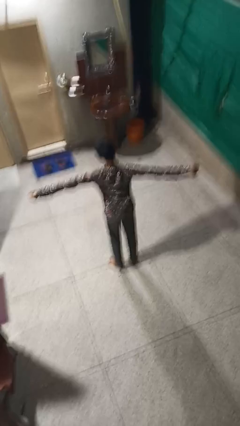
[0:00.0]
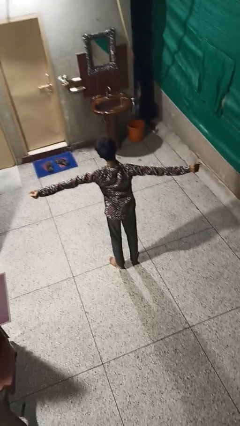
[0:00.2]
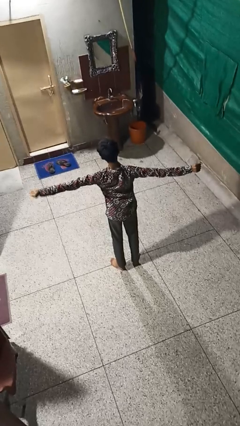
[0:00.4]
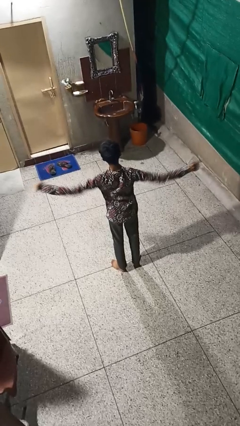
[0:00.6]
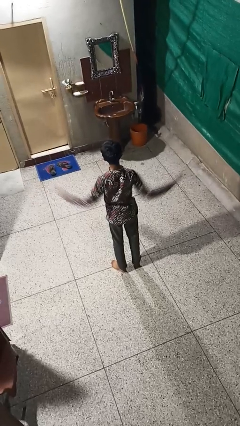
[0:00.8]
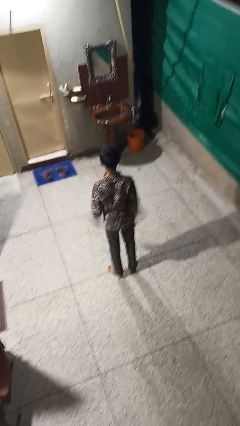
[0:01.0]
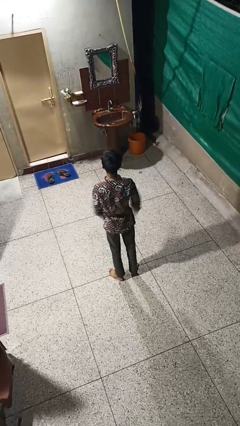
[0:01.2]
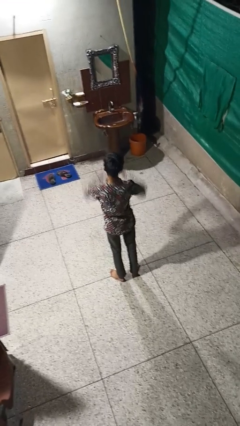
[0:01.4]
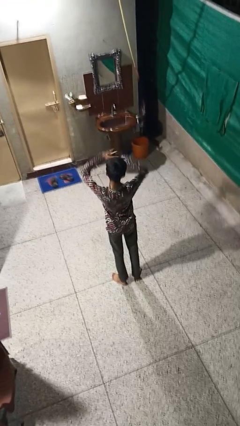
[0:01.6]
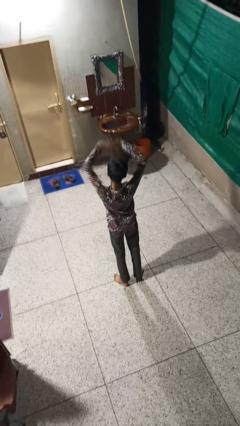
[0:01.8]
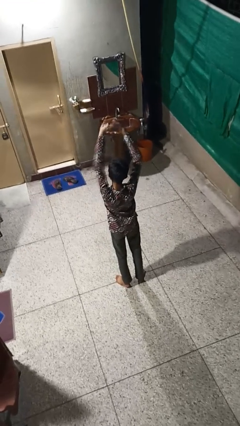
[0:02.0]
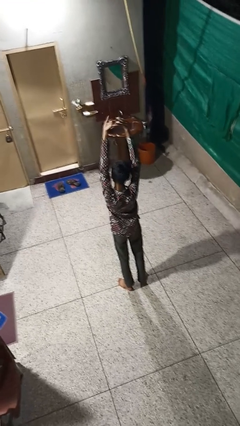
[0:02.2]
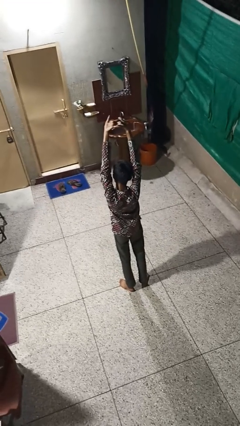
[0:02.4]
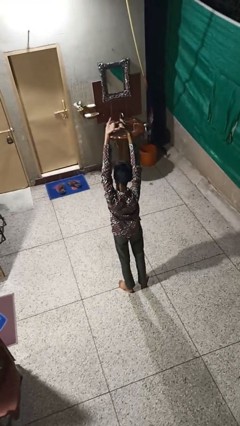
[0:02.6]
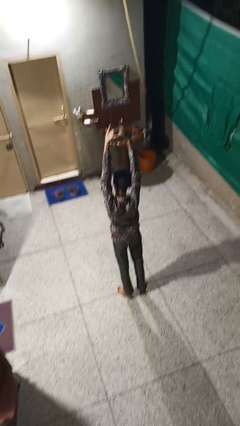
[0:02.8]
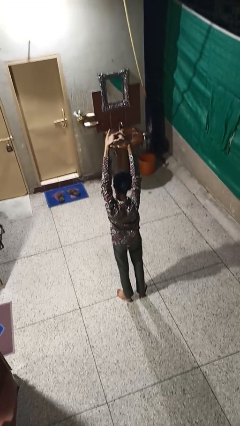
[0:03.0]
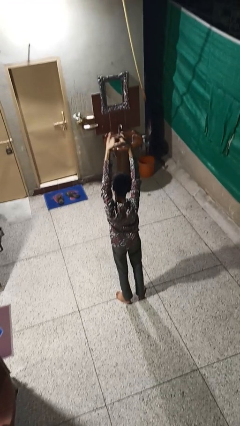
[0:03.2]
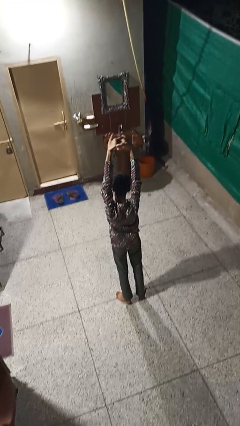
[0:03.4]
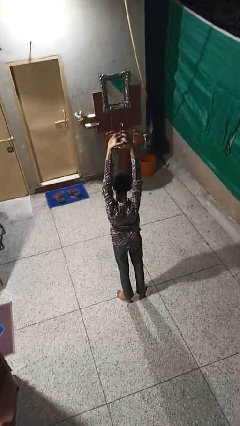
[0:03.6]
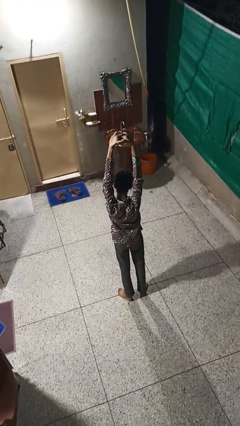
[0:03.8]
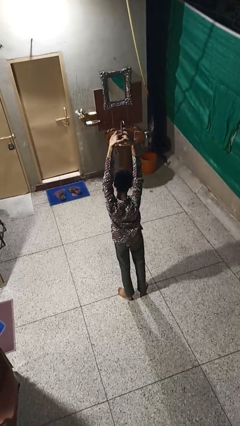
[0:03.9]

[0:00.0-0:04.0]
person stretches arms over head

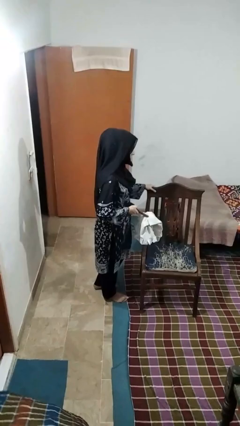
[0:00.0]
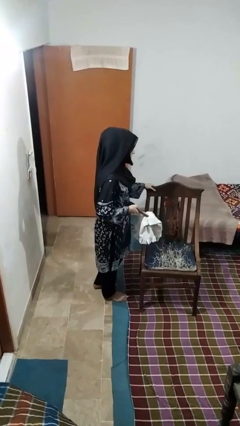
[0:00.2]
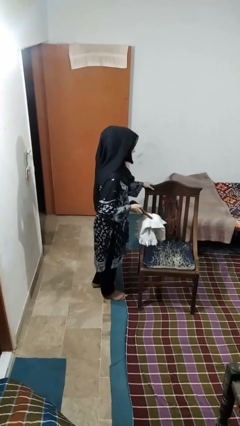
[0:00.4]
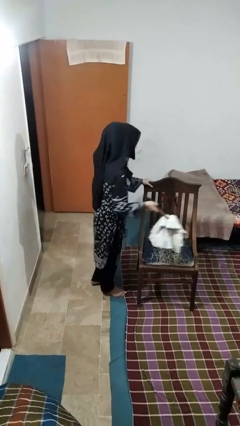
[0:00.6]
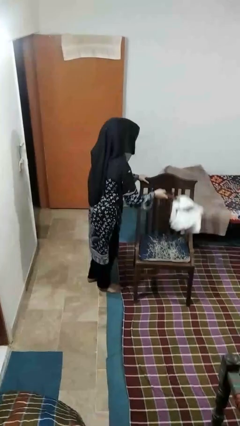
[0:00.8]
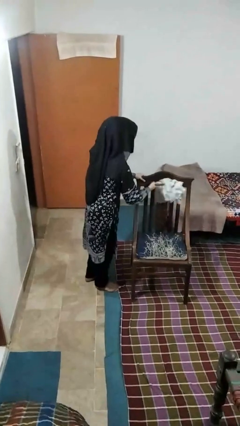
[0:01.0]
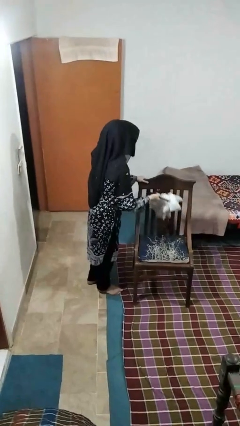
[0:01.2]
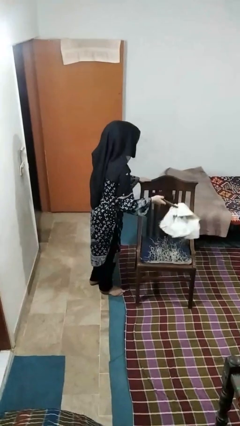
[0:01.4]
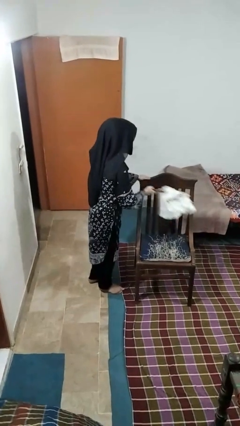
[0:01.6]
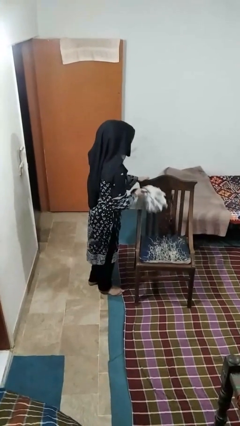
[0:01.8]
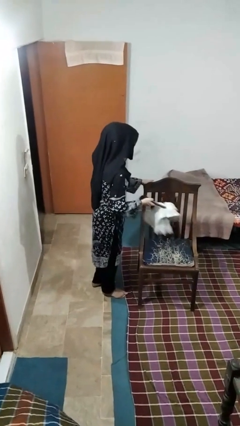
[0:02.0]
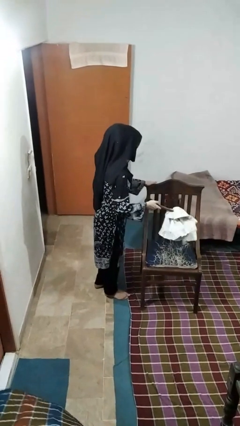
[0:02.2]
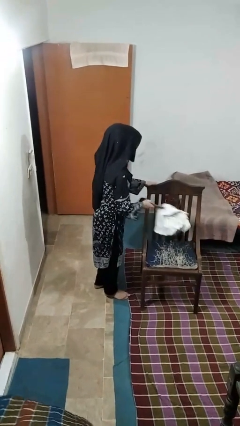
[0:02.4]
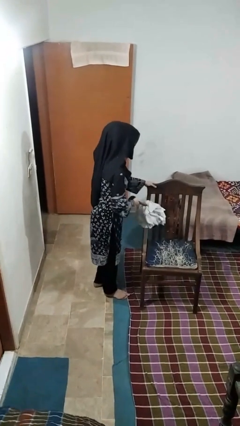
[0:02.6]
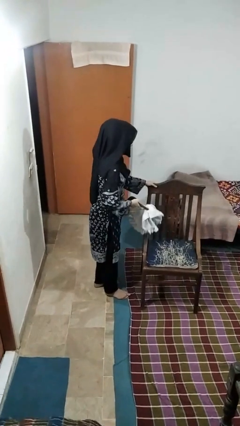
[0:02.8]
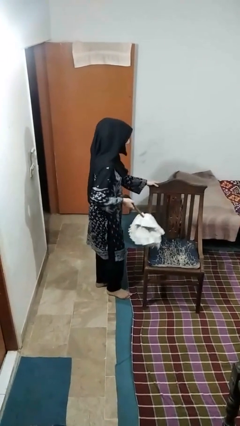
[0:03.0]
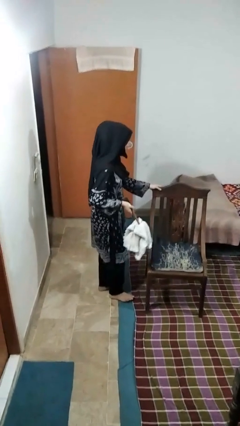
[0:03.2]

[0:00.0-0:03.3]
person dusts furniture

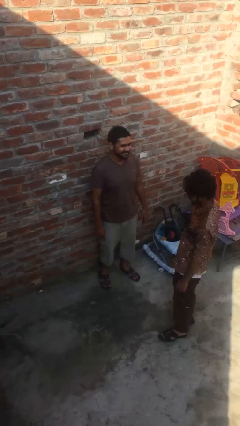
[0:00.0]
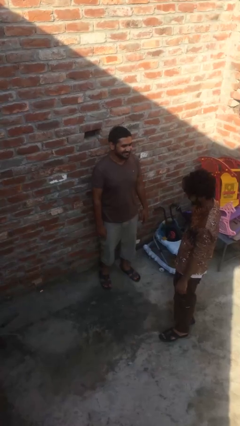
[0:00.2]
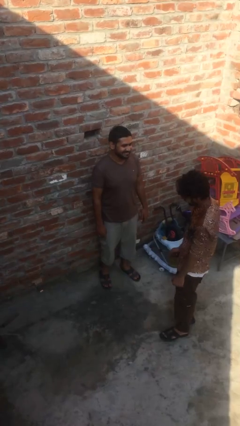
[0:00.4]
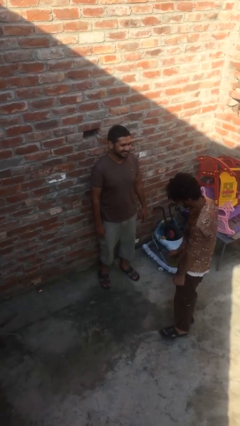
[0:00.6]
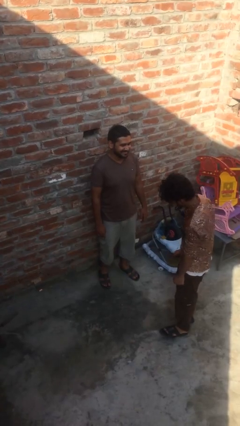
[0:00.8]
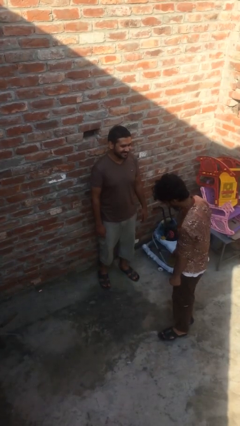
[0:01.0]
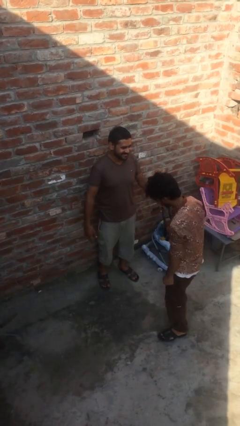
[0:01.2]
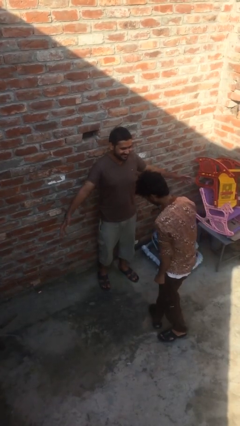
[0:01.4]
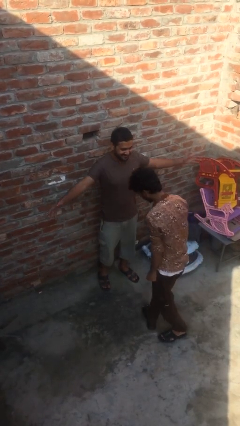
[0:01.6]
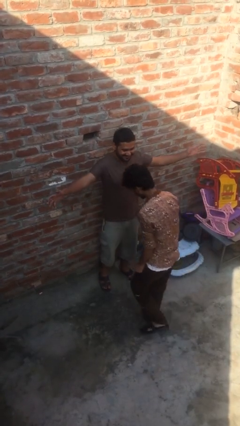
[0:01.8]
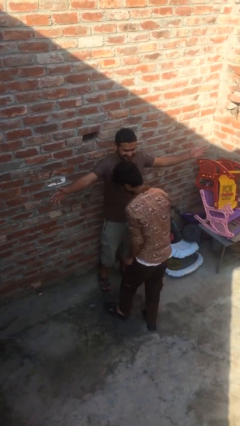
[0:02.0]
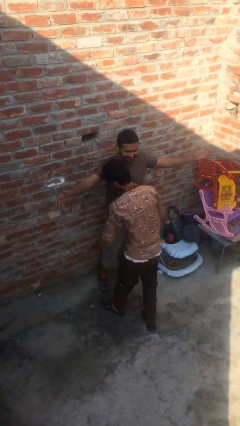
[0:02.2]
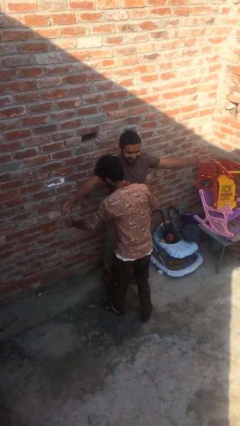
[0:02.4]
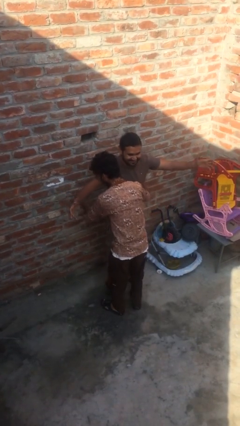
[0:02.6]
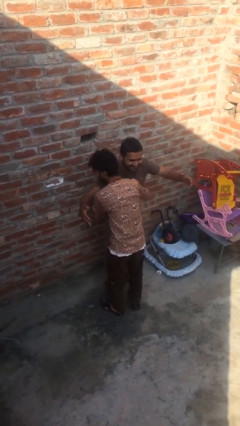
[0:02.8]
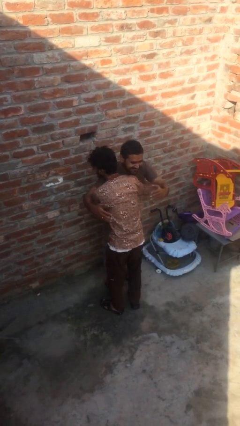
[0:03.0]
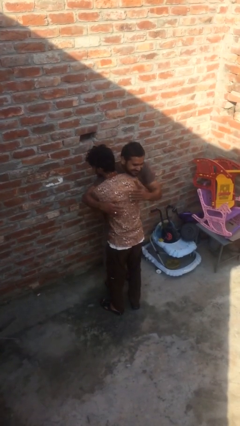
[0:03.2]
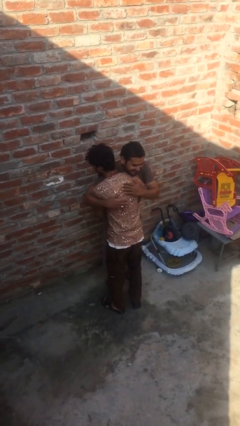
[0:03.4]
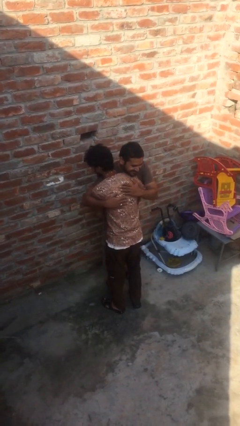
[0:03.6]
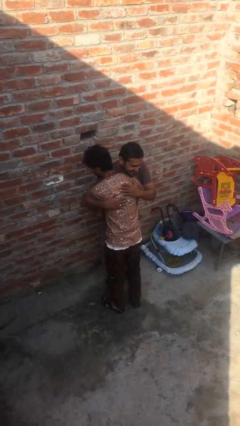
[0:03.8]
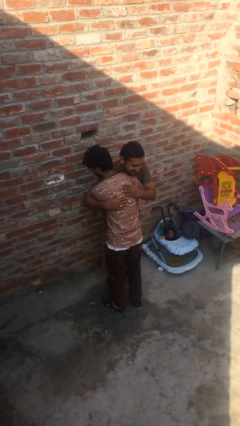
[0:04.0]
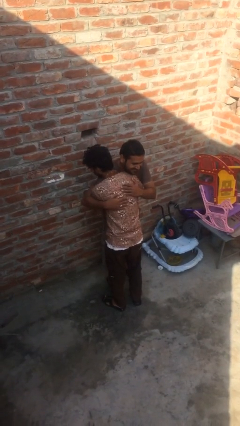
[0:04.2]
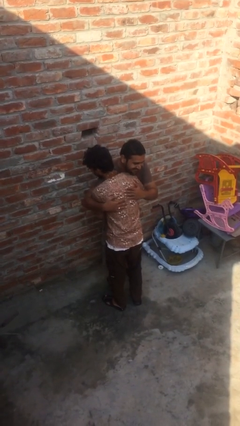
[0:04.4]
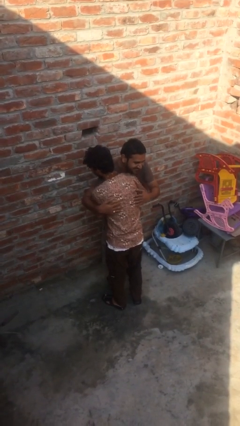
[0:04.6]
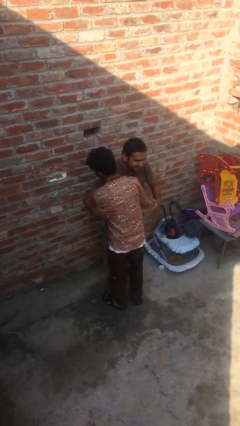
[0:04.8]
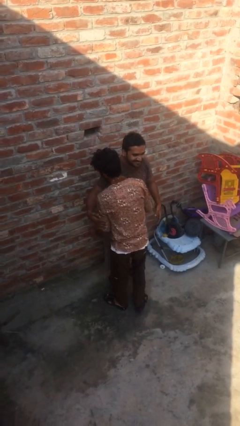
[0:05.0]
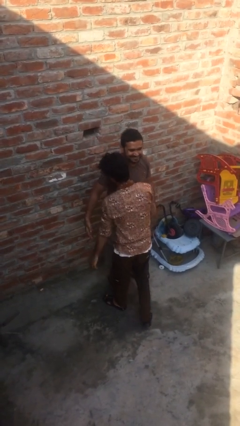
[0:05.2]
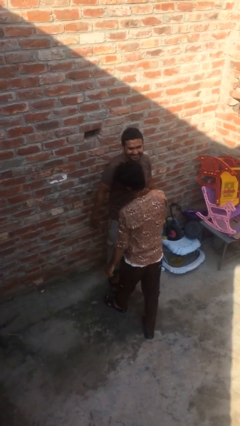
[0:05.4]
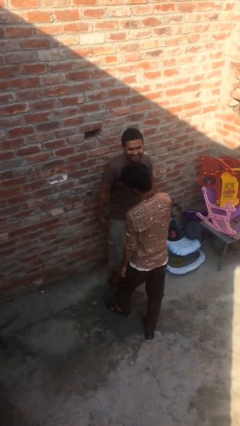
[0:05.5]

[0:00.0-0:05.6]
person embraces person

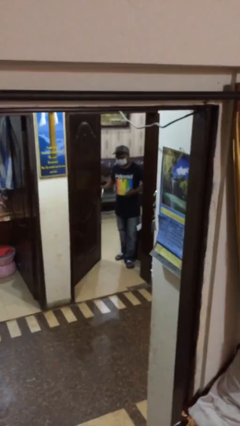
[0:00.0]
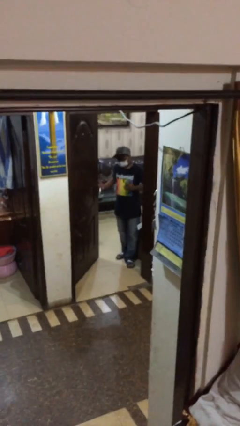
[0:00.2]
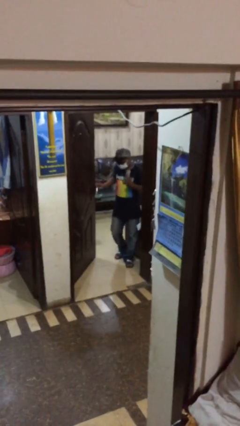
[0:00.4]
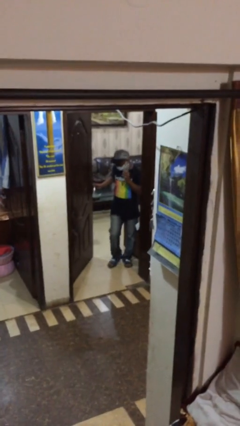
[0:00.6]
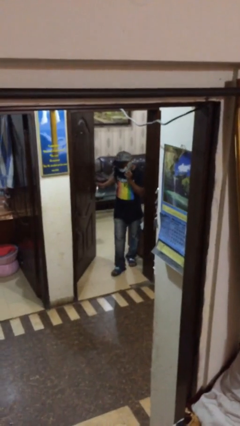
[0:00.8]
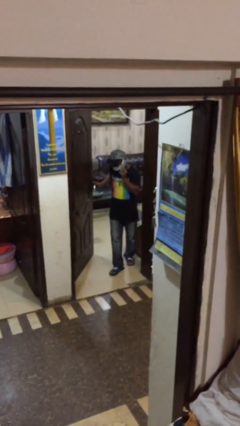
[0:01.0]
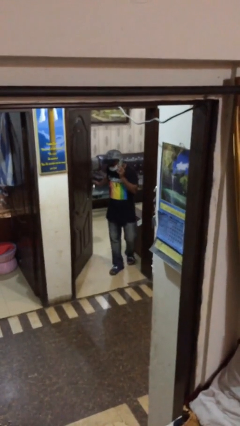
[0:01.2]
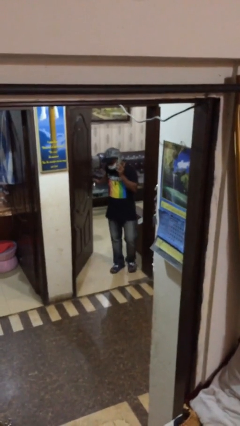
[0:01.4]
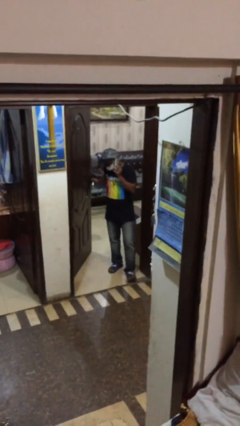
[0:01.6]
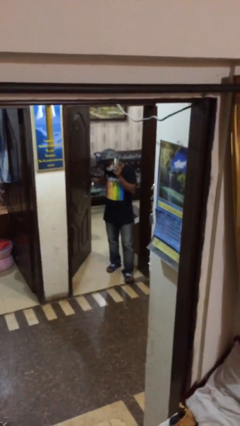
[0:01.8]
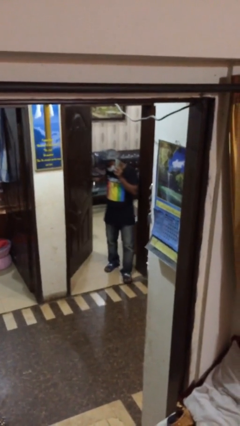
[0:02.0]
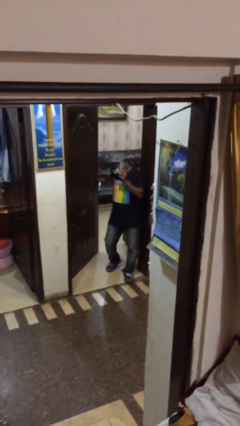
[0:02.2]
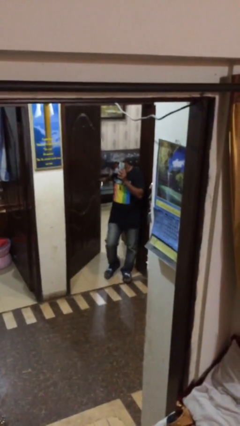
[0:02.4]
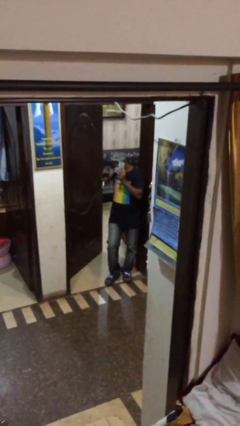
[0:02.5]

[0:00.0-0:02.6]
person enters scene through structure

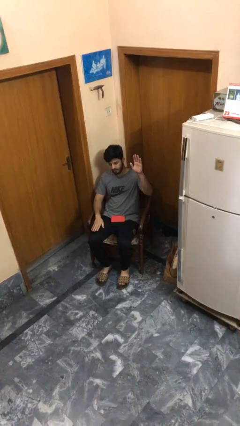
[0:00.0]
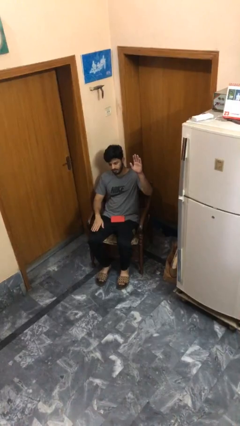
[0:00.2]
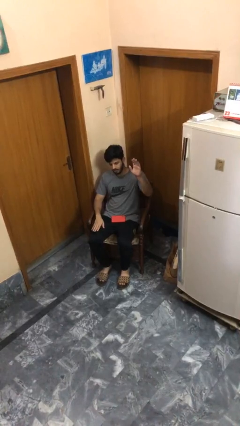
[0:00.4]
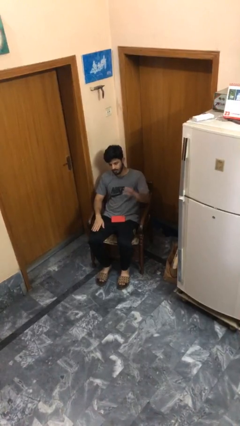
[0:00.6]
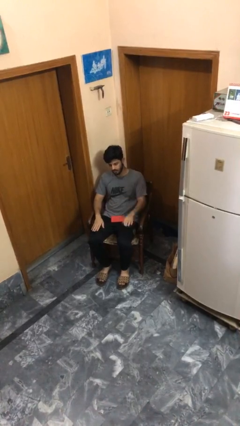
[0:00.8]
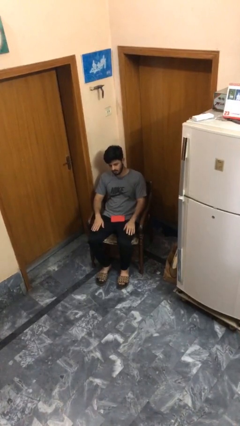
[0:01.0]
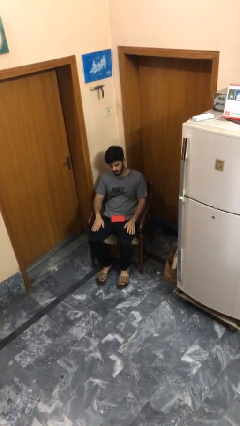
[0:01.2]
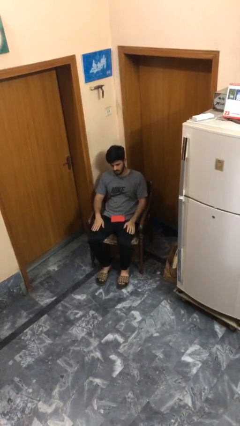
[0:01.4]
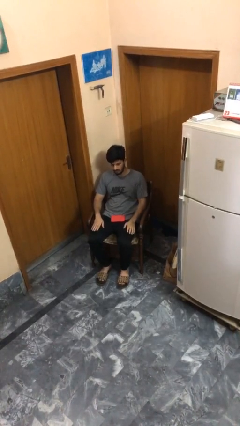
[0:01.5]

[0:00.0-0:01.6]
person gestures lower hand

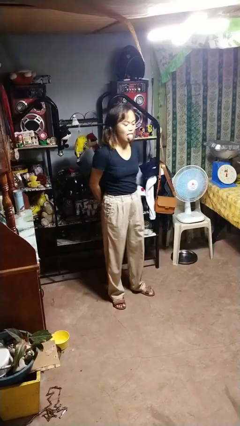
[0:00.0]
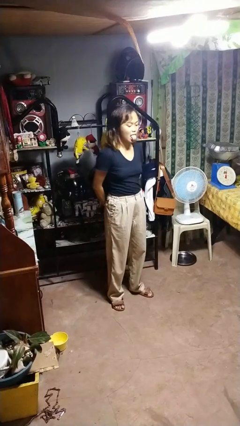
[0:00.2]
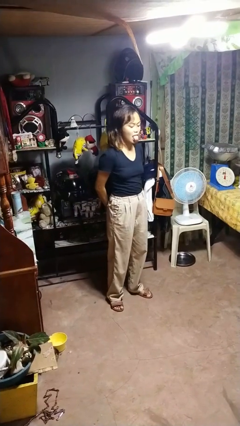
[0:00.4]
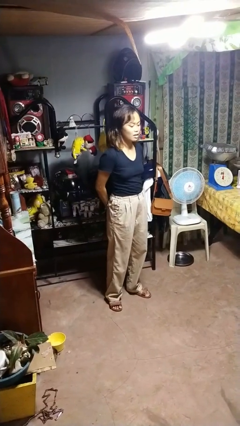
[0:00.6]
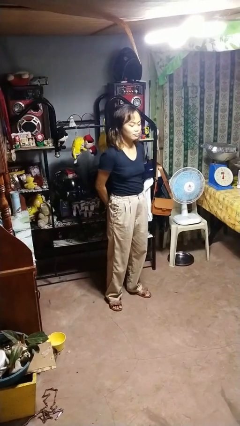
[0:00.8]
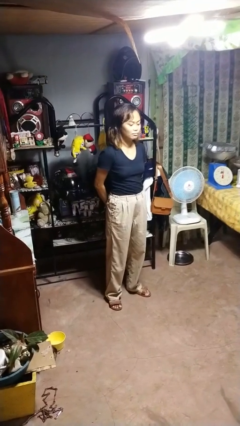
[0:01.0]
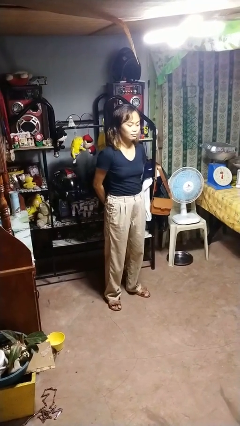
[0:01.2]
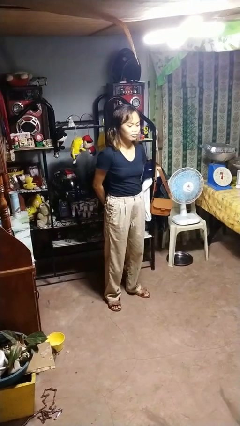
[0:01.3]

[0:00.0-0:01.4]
person sticks out tongue
